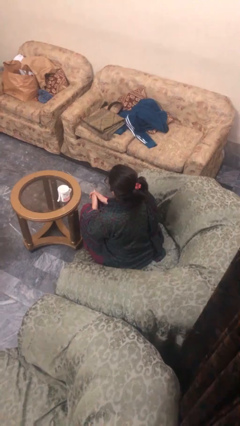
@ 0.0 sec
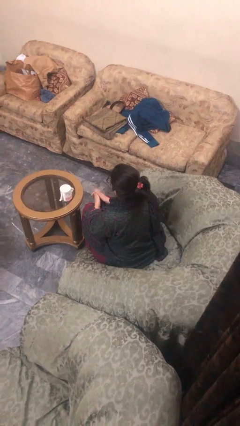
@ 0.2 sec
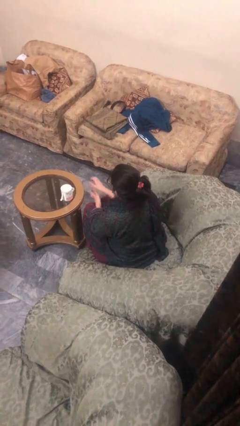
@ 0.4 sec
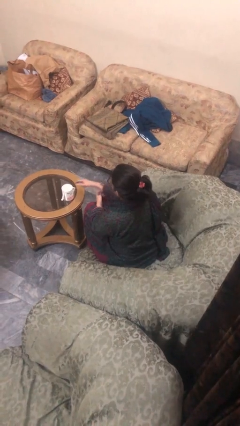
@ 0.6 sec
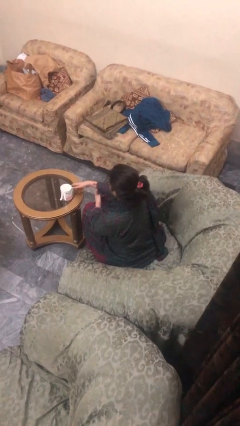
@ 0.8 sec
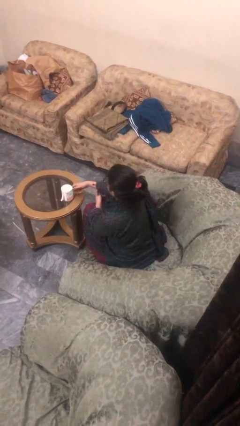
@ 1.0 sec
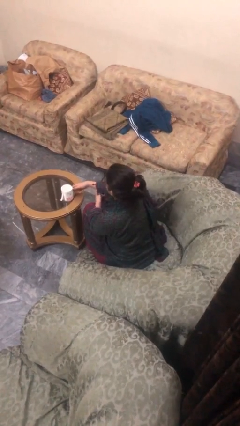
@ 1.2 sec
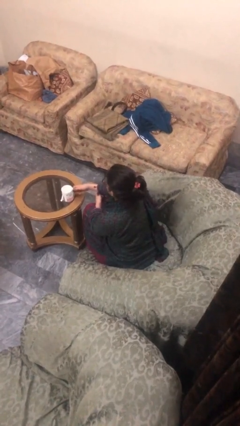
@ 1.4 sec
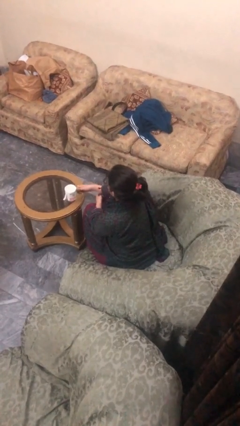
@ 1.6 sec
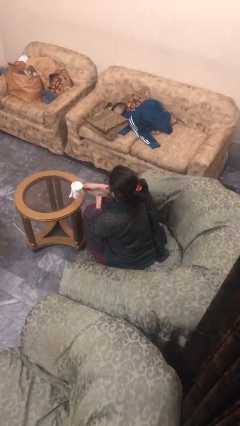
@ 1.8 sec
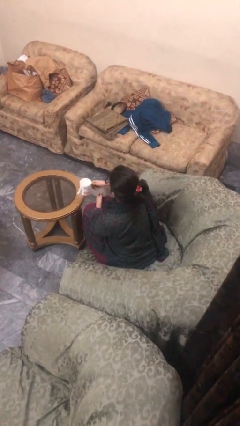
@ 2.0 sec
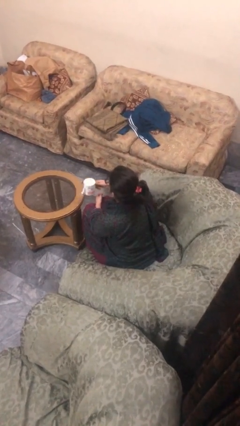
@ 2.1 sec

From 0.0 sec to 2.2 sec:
person picks up object from table

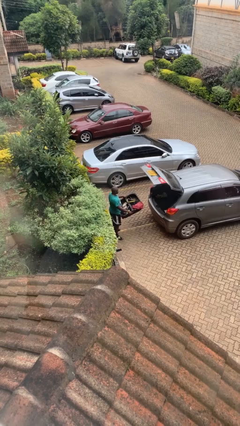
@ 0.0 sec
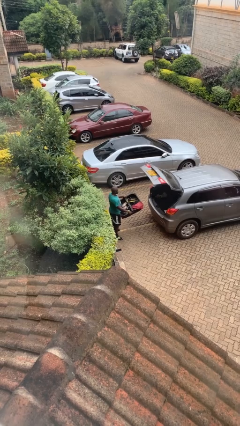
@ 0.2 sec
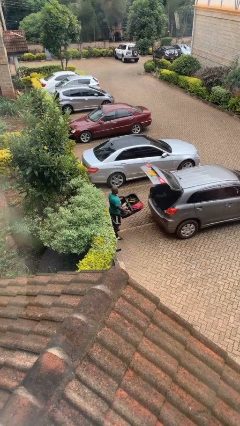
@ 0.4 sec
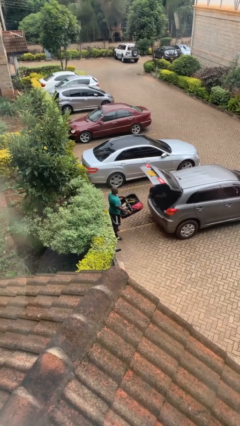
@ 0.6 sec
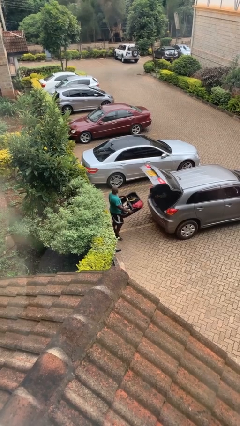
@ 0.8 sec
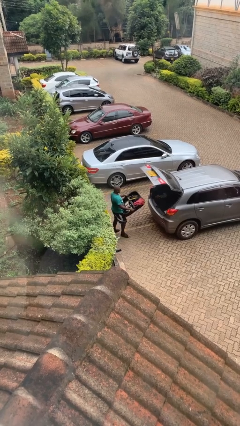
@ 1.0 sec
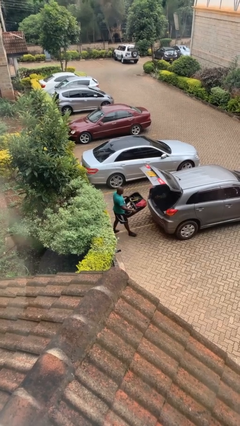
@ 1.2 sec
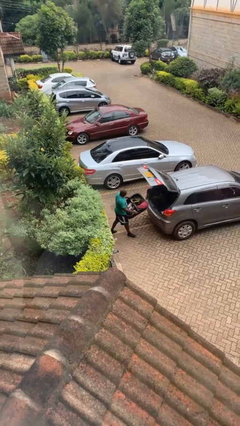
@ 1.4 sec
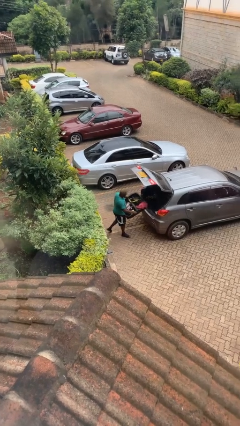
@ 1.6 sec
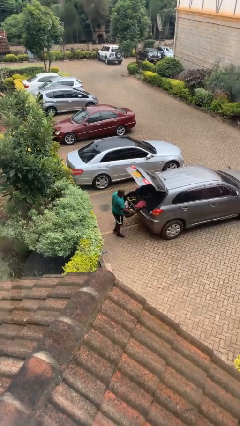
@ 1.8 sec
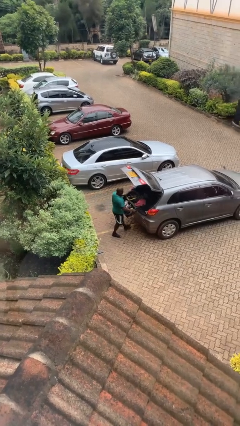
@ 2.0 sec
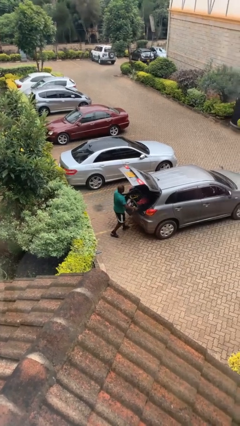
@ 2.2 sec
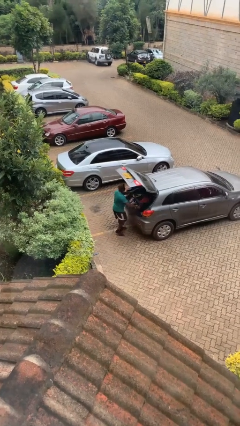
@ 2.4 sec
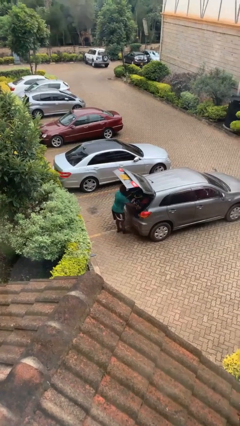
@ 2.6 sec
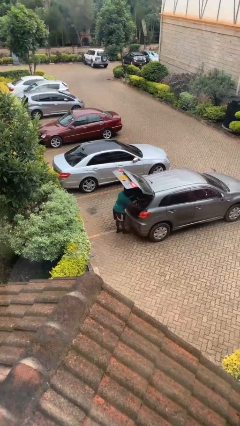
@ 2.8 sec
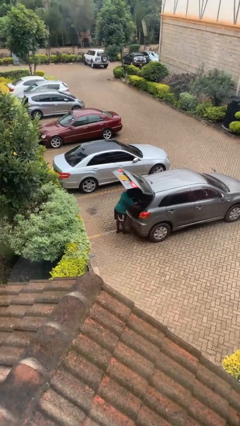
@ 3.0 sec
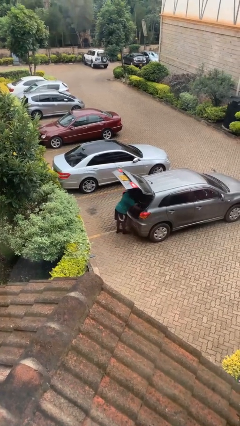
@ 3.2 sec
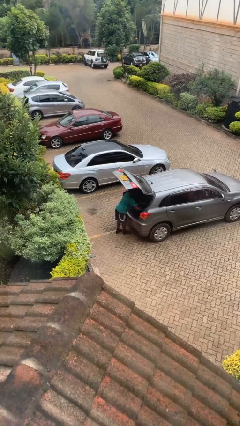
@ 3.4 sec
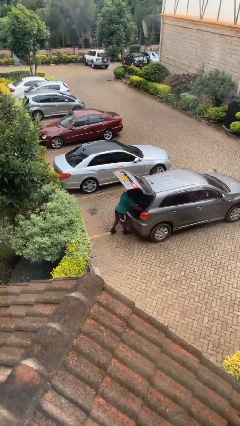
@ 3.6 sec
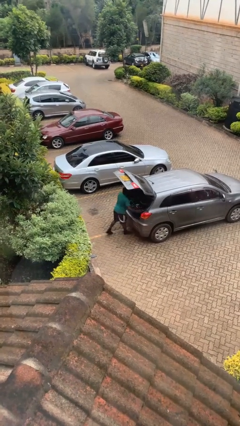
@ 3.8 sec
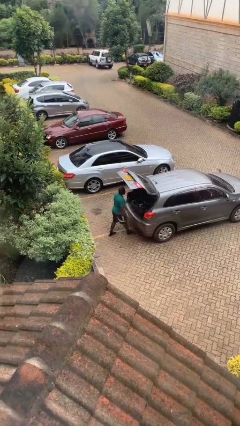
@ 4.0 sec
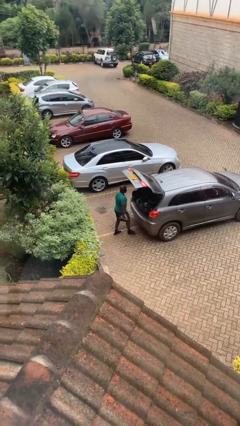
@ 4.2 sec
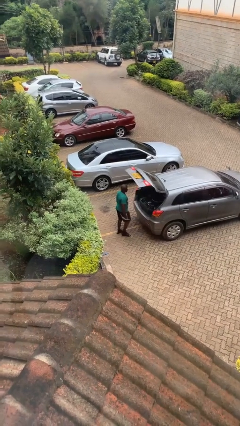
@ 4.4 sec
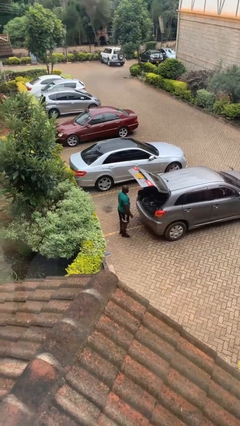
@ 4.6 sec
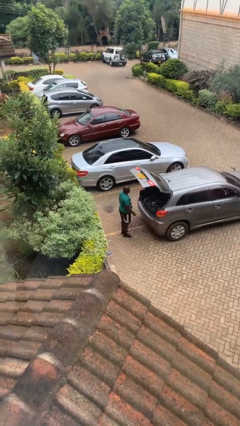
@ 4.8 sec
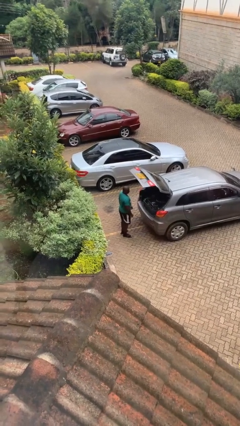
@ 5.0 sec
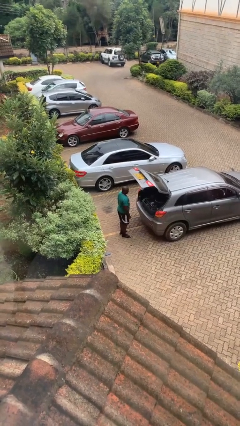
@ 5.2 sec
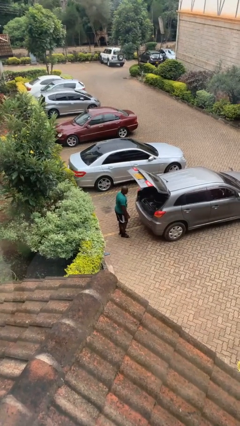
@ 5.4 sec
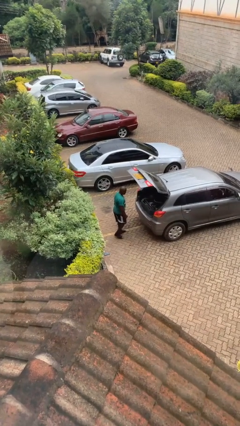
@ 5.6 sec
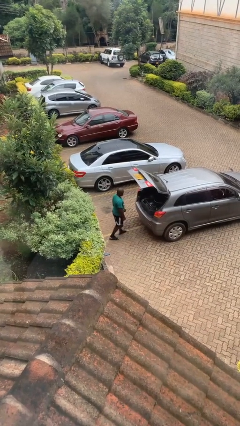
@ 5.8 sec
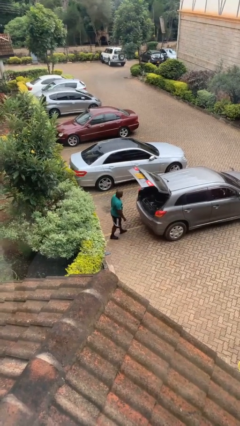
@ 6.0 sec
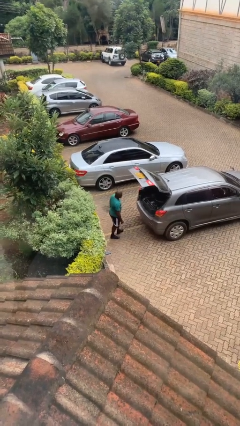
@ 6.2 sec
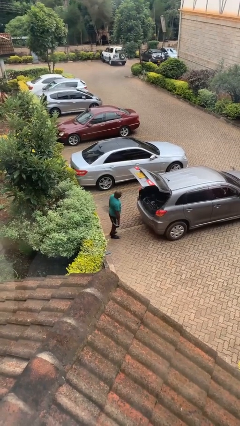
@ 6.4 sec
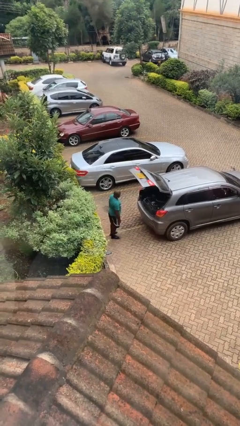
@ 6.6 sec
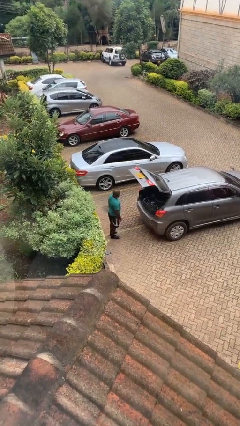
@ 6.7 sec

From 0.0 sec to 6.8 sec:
person loads car

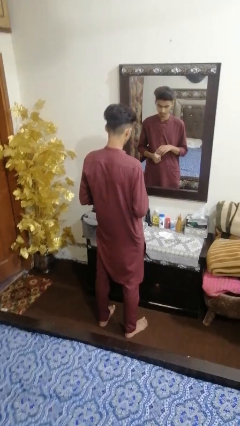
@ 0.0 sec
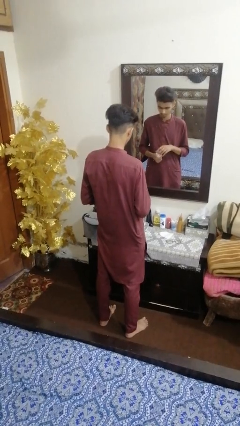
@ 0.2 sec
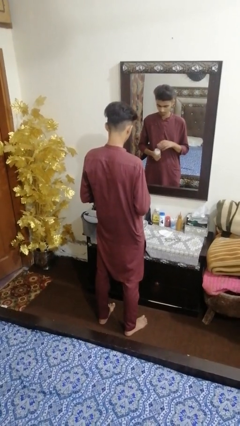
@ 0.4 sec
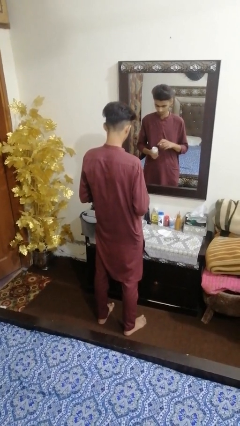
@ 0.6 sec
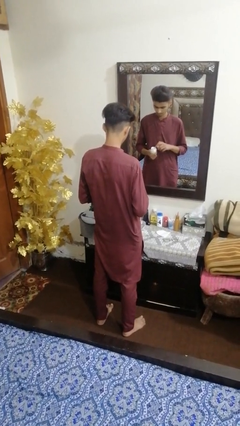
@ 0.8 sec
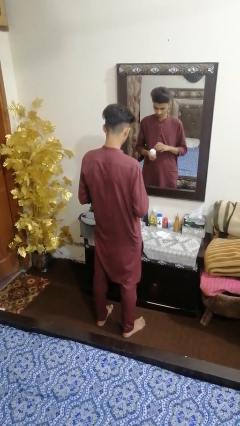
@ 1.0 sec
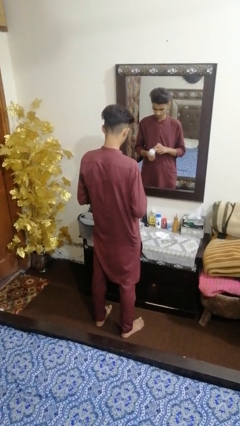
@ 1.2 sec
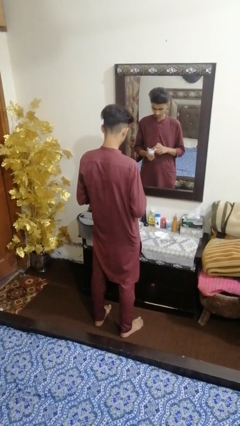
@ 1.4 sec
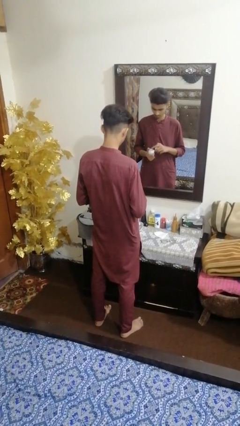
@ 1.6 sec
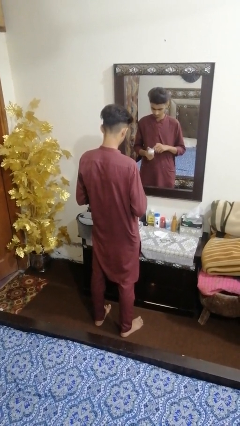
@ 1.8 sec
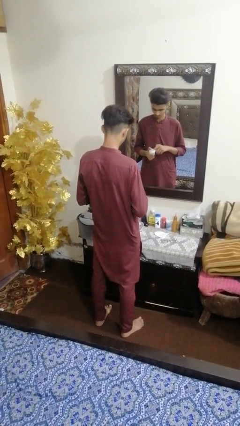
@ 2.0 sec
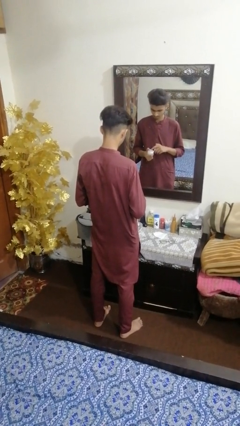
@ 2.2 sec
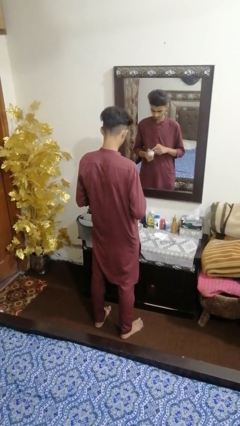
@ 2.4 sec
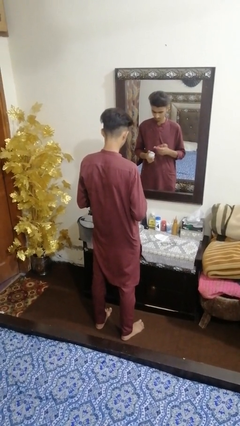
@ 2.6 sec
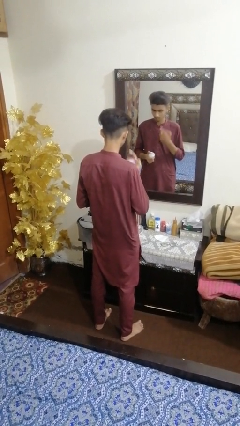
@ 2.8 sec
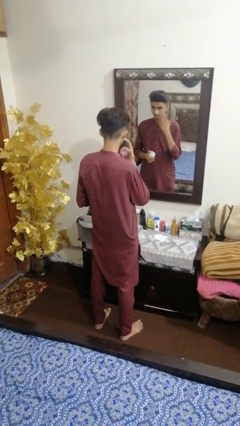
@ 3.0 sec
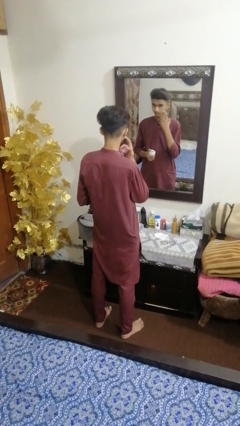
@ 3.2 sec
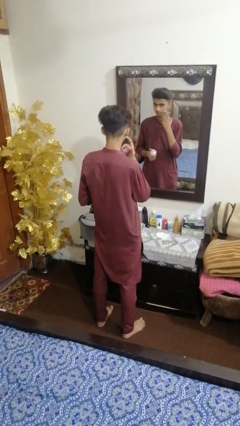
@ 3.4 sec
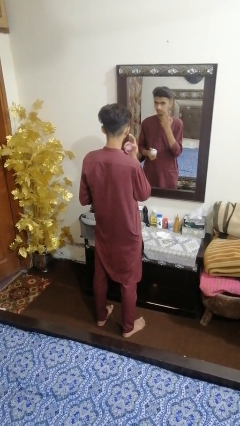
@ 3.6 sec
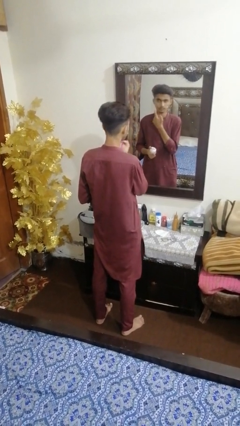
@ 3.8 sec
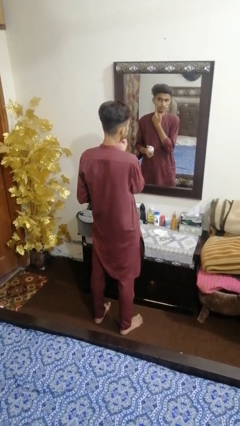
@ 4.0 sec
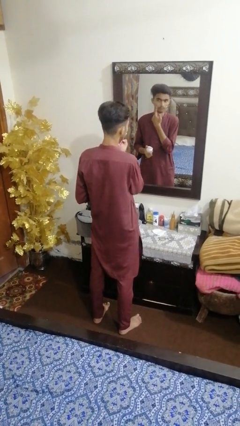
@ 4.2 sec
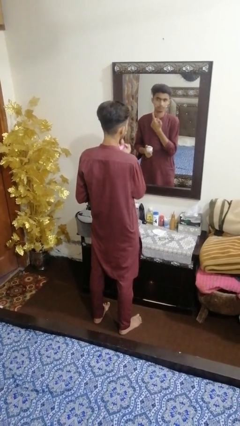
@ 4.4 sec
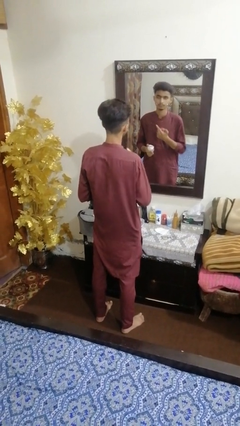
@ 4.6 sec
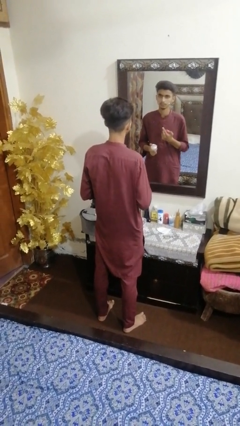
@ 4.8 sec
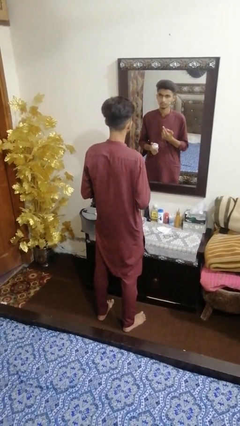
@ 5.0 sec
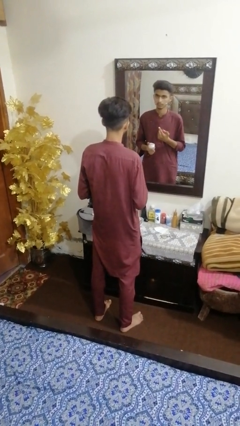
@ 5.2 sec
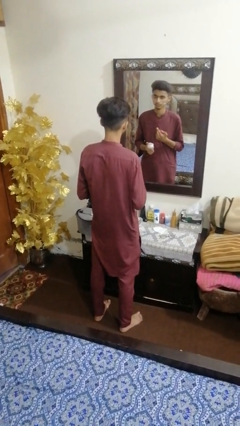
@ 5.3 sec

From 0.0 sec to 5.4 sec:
person applies foundation makeup

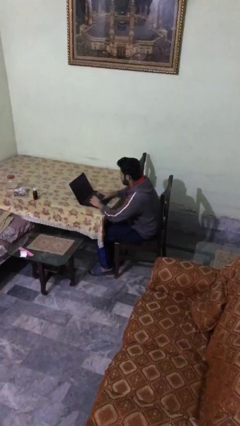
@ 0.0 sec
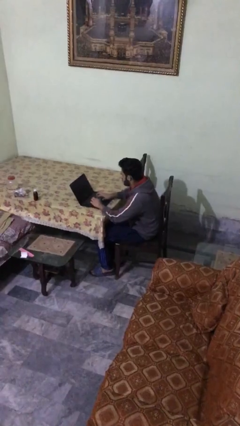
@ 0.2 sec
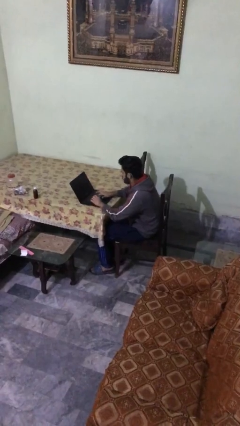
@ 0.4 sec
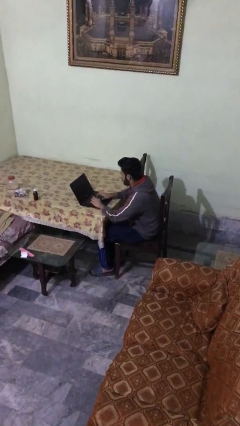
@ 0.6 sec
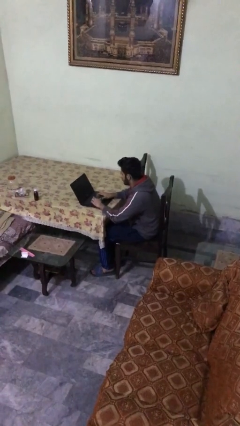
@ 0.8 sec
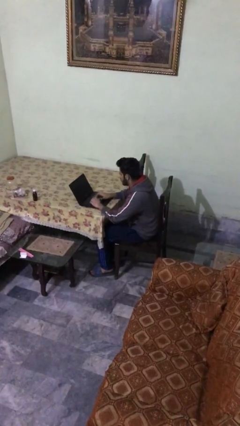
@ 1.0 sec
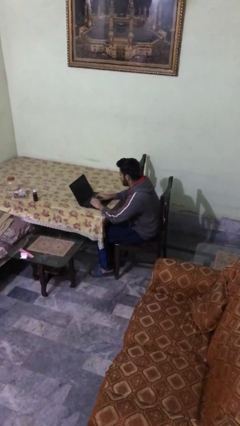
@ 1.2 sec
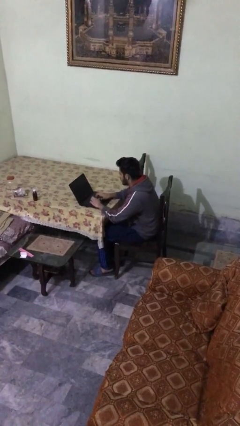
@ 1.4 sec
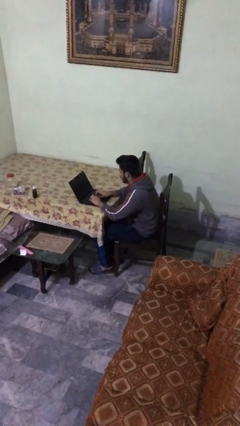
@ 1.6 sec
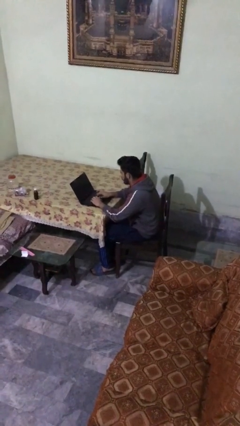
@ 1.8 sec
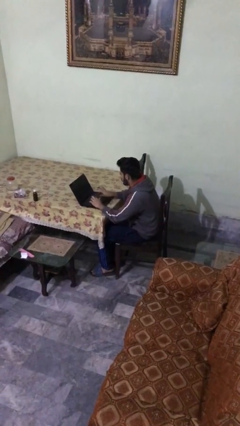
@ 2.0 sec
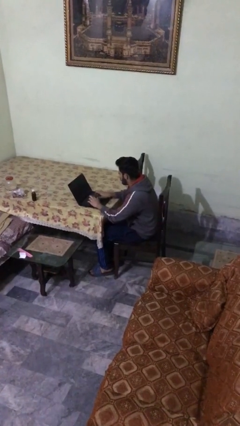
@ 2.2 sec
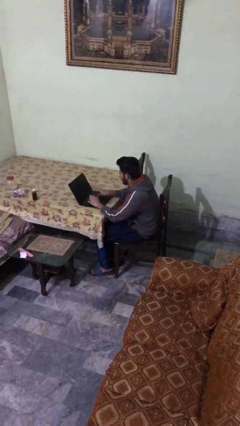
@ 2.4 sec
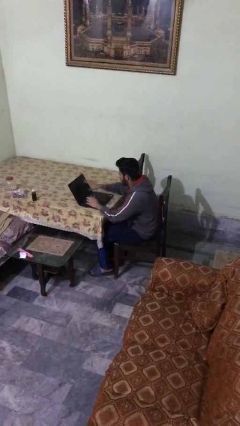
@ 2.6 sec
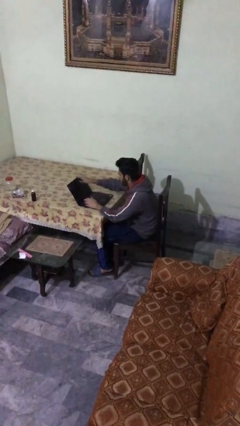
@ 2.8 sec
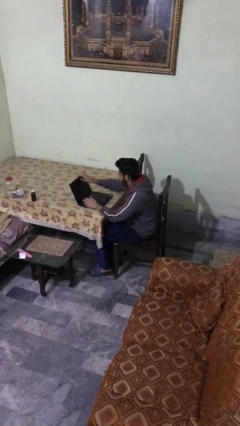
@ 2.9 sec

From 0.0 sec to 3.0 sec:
person interacts with laptop

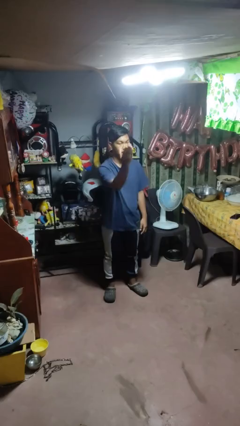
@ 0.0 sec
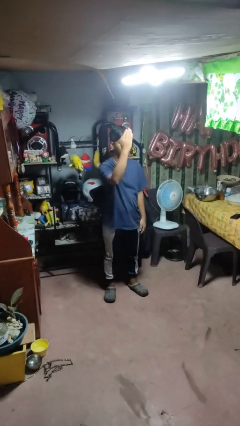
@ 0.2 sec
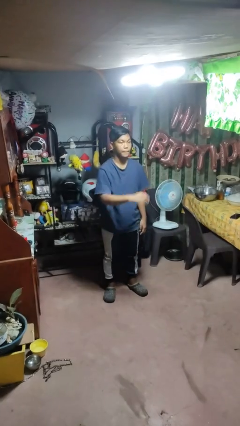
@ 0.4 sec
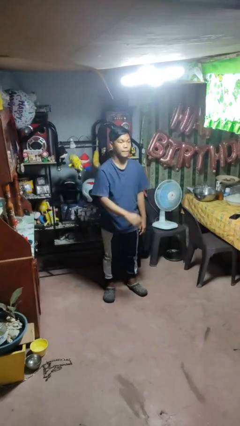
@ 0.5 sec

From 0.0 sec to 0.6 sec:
person gestures swipe up
